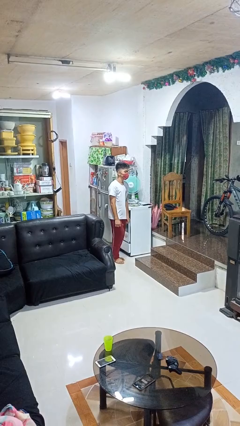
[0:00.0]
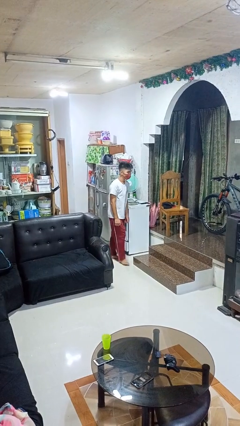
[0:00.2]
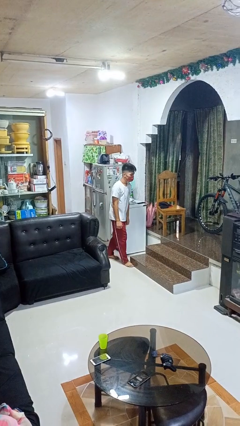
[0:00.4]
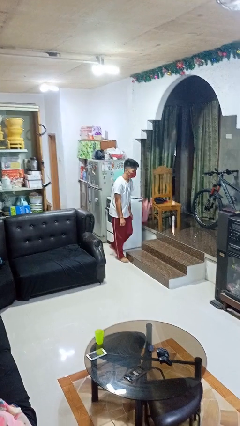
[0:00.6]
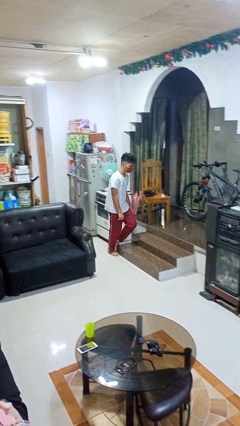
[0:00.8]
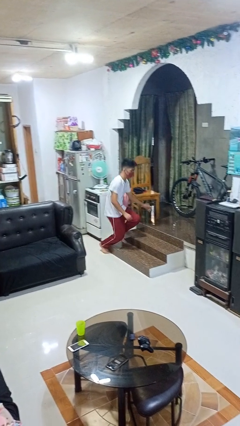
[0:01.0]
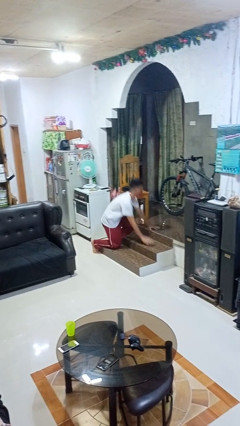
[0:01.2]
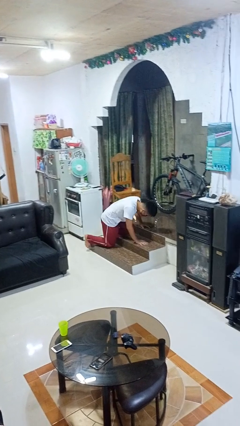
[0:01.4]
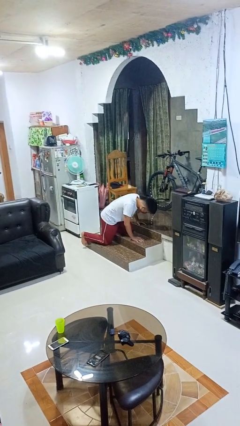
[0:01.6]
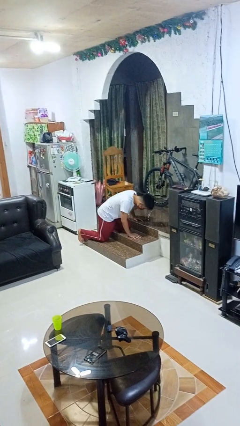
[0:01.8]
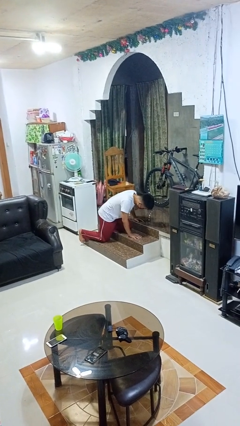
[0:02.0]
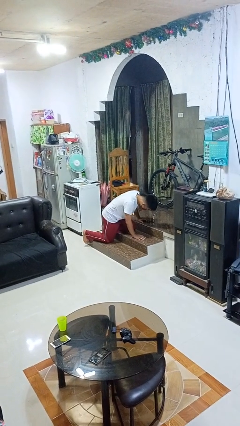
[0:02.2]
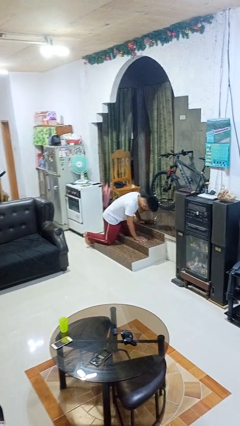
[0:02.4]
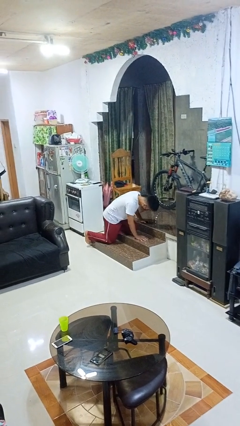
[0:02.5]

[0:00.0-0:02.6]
person trips on object on floor

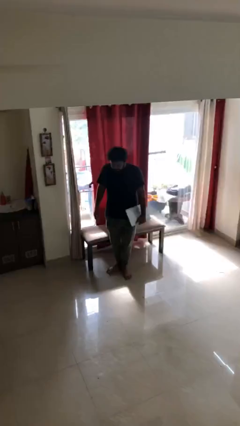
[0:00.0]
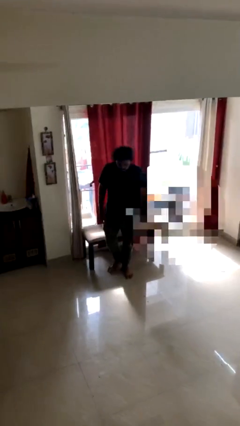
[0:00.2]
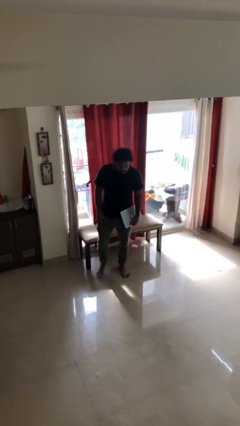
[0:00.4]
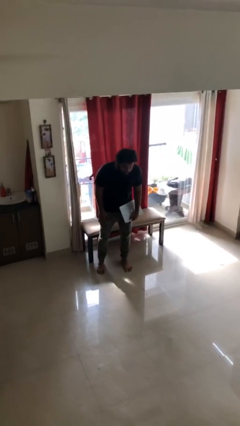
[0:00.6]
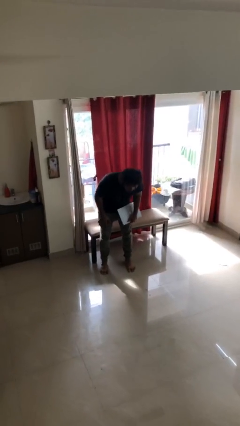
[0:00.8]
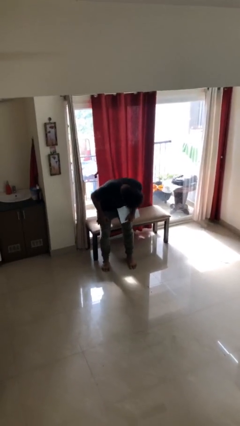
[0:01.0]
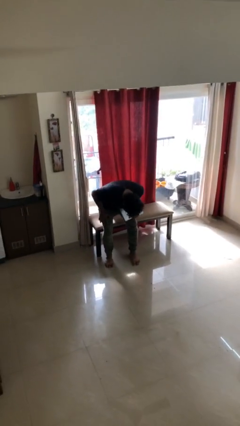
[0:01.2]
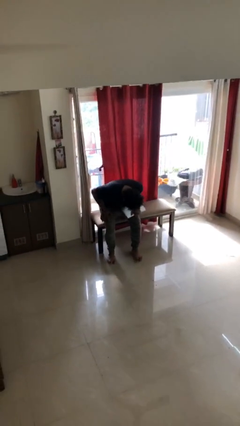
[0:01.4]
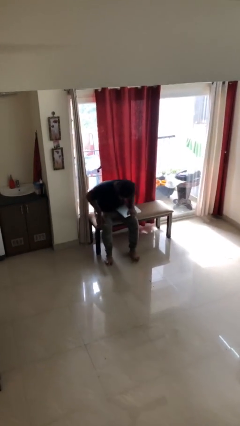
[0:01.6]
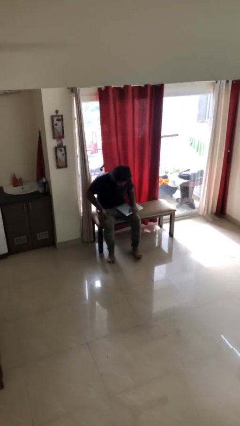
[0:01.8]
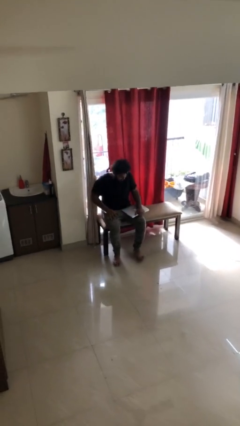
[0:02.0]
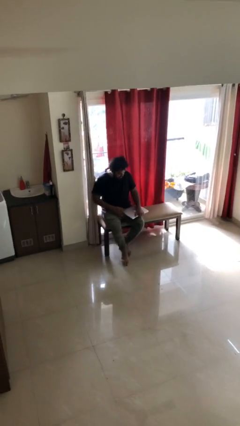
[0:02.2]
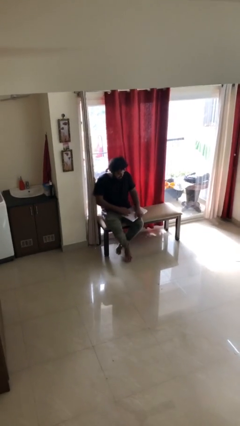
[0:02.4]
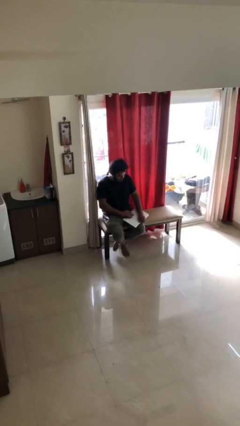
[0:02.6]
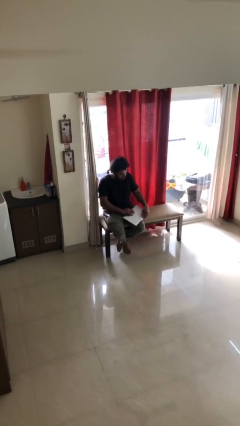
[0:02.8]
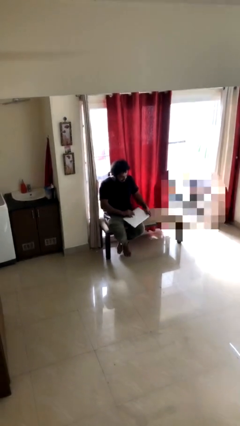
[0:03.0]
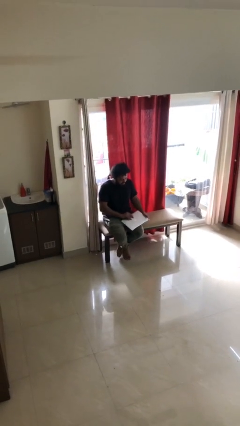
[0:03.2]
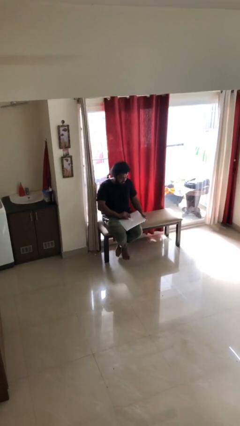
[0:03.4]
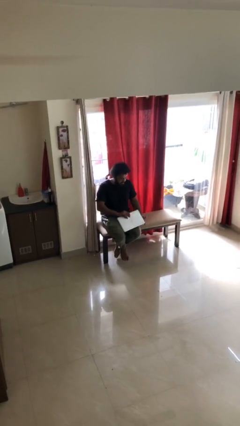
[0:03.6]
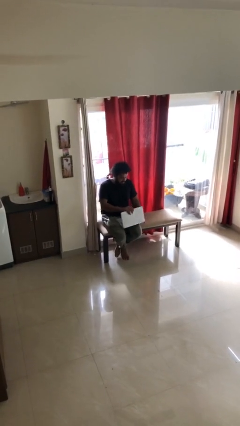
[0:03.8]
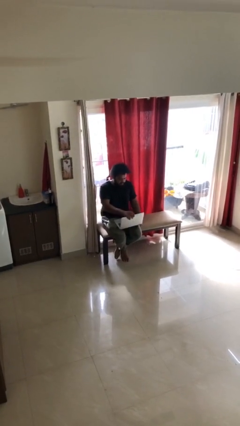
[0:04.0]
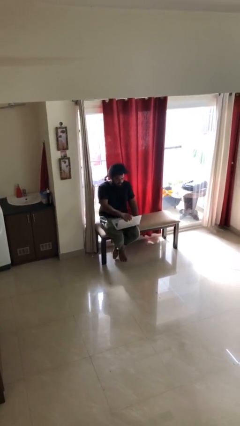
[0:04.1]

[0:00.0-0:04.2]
person sits down

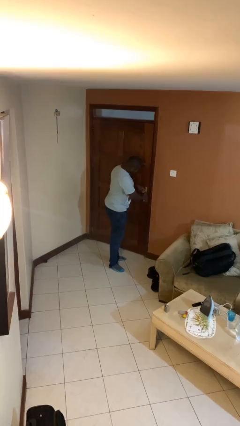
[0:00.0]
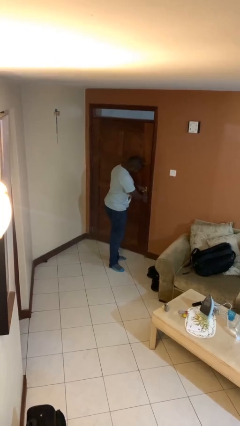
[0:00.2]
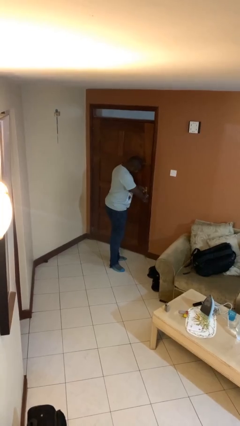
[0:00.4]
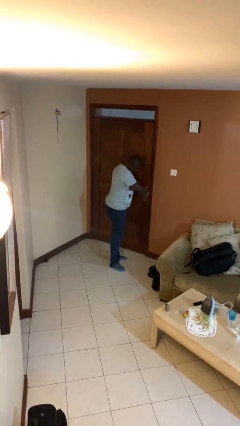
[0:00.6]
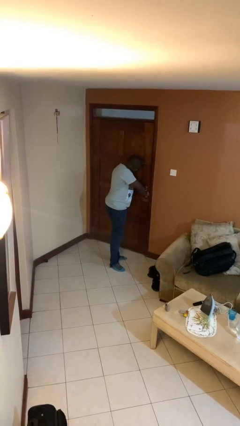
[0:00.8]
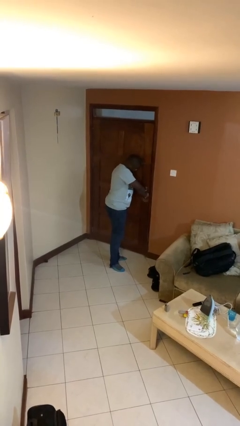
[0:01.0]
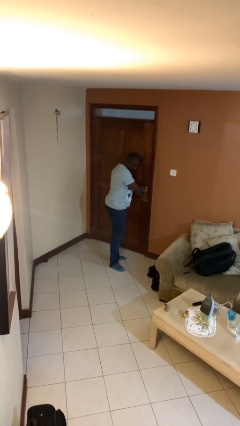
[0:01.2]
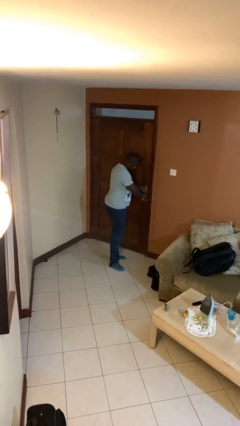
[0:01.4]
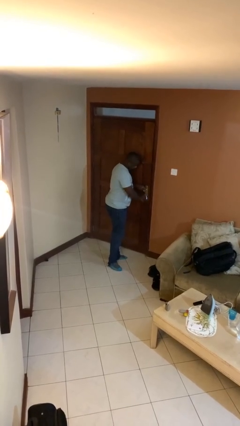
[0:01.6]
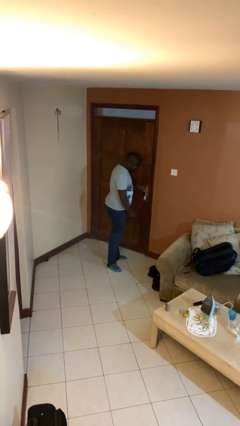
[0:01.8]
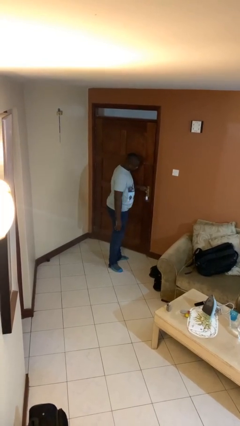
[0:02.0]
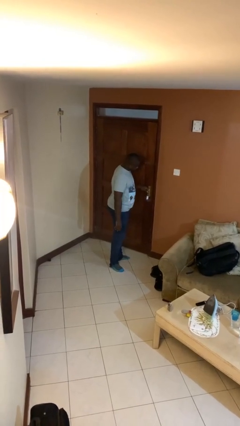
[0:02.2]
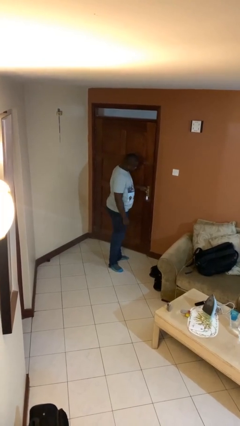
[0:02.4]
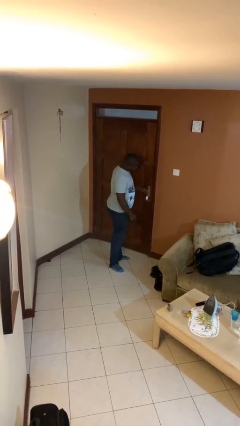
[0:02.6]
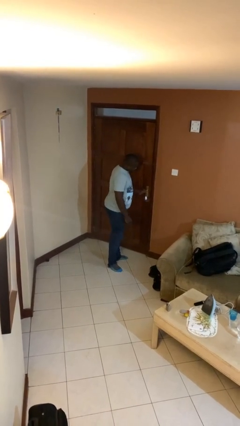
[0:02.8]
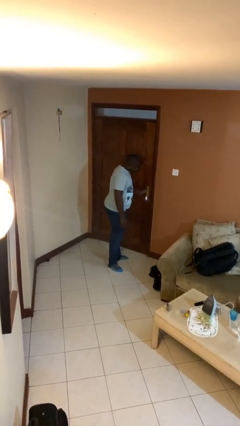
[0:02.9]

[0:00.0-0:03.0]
person unlocks door with keys

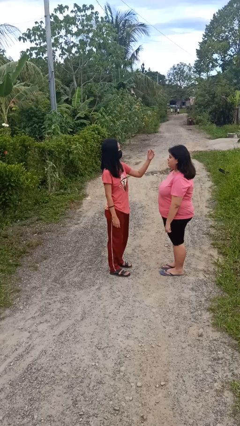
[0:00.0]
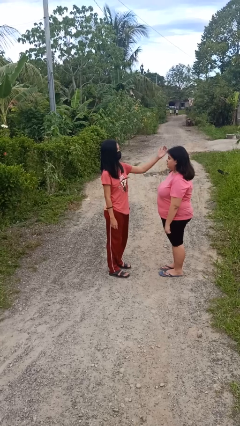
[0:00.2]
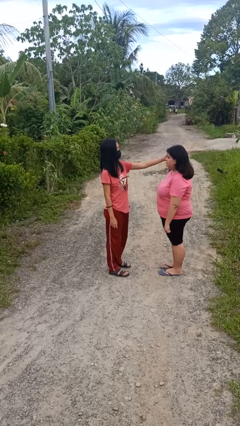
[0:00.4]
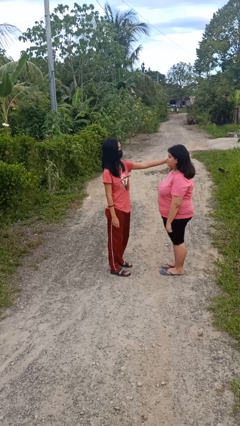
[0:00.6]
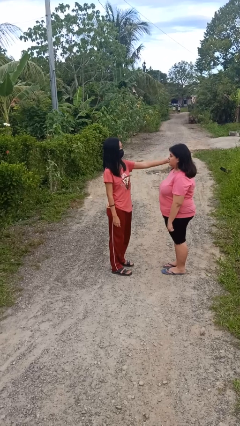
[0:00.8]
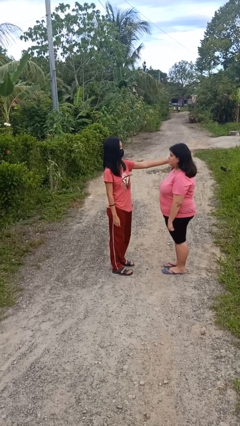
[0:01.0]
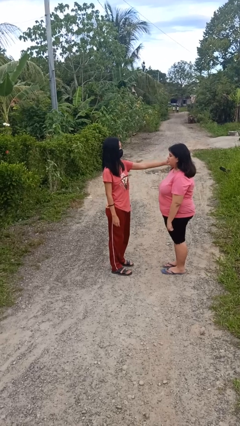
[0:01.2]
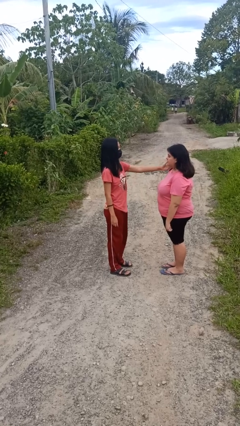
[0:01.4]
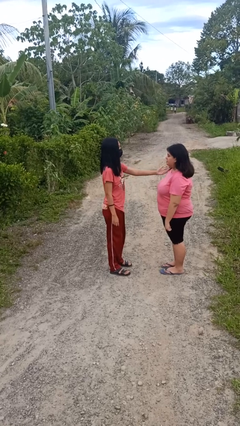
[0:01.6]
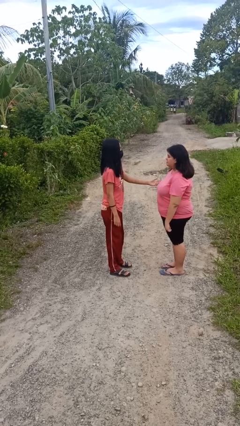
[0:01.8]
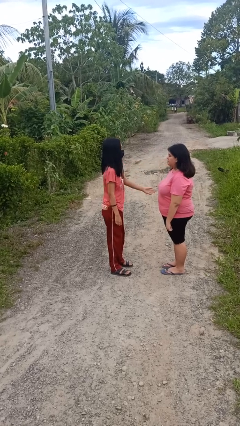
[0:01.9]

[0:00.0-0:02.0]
person touches face of person

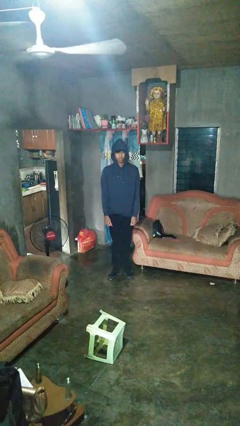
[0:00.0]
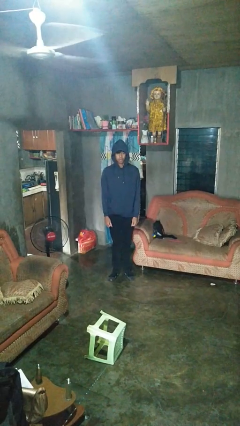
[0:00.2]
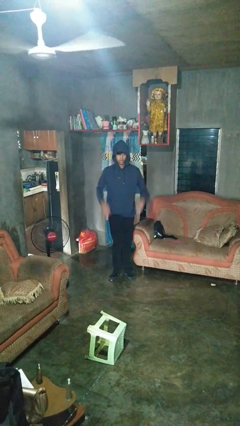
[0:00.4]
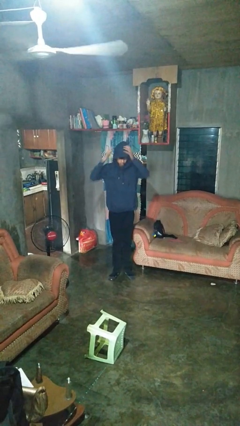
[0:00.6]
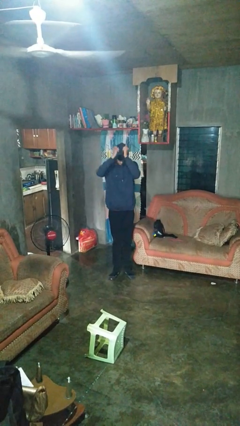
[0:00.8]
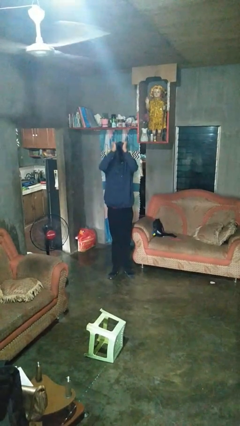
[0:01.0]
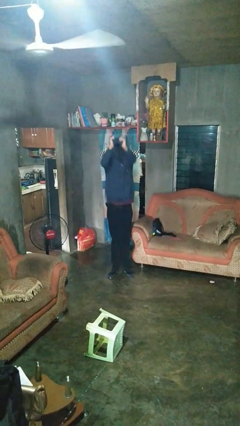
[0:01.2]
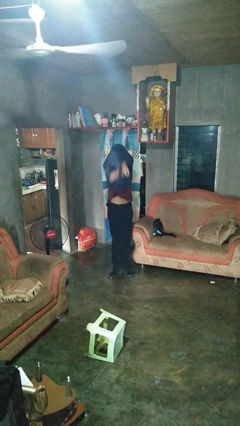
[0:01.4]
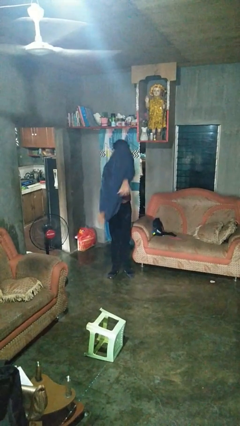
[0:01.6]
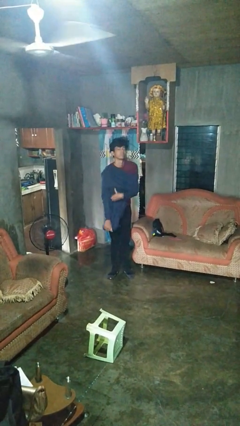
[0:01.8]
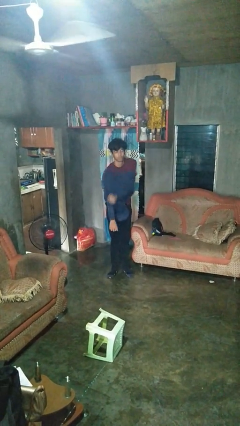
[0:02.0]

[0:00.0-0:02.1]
person takes off hoodie

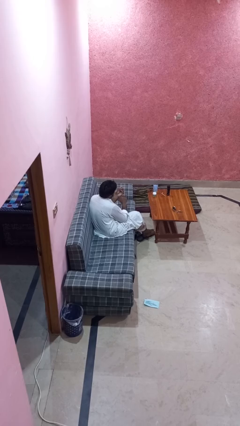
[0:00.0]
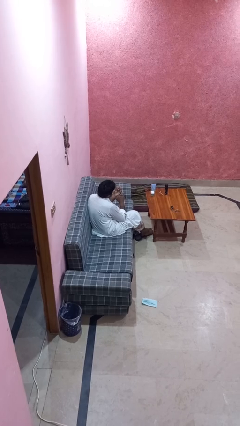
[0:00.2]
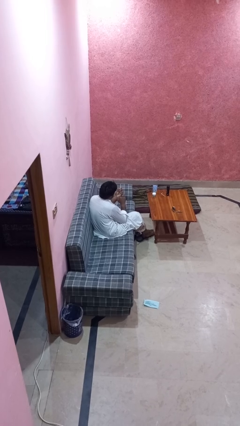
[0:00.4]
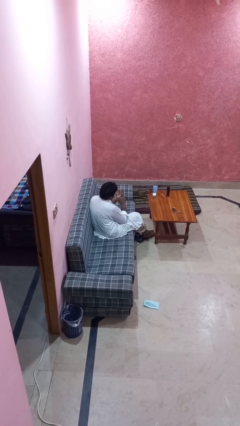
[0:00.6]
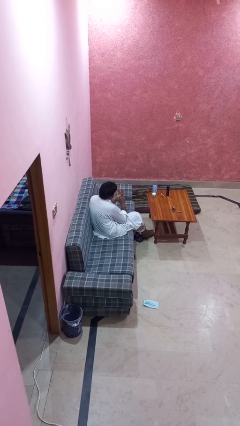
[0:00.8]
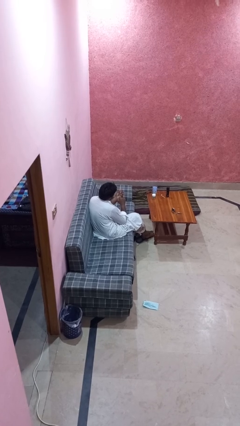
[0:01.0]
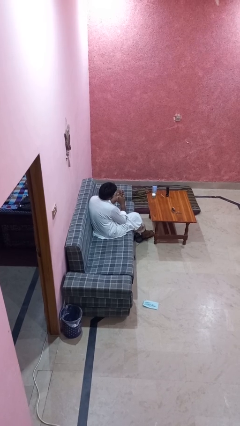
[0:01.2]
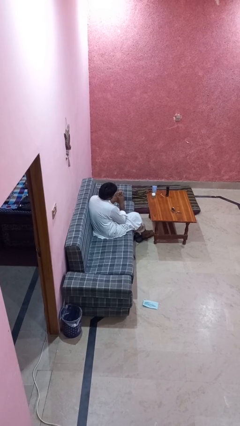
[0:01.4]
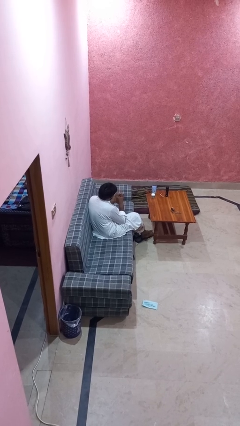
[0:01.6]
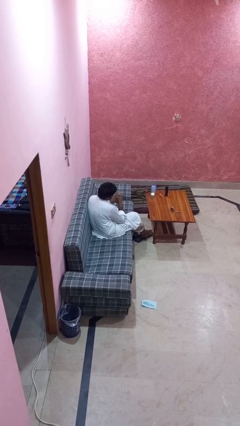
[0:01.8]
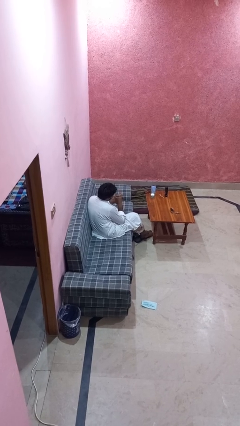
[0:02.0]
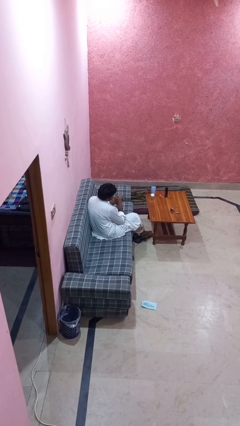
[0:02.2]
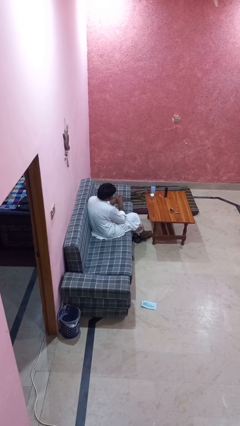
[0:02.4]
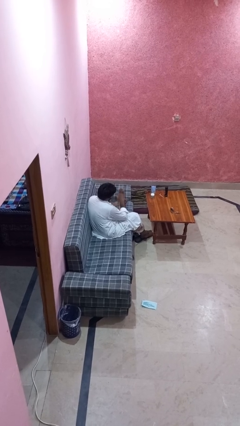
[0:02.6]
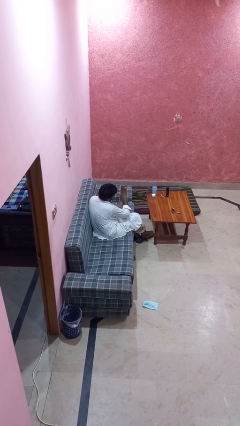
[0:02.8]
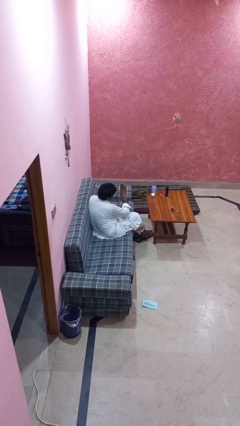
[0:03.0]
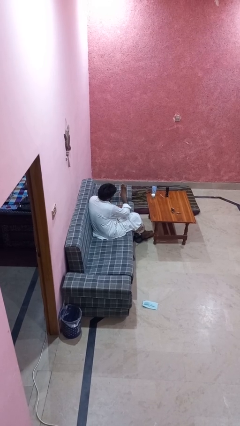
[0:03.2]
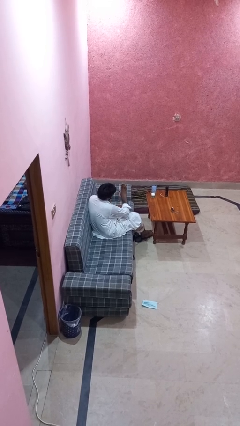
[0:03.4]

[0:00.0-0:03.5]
person puts on ring
